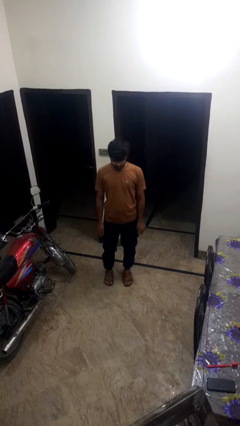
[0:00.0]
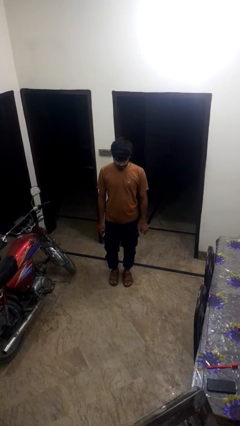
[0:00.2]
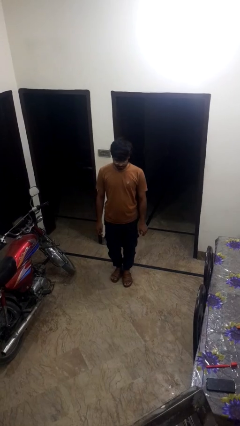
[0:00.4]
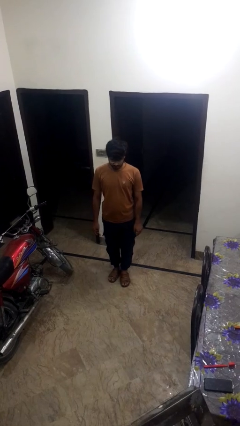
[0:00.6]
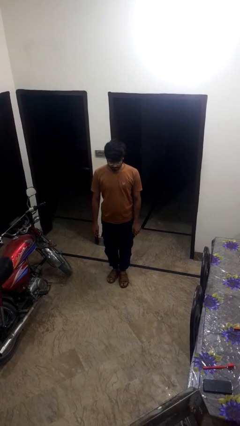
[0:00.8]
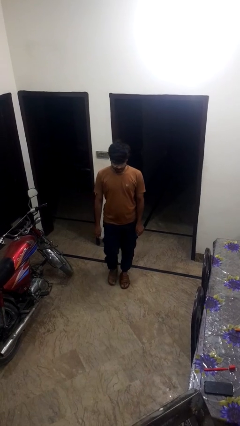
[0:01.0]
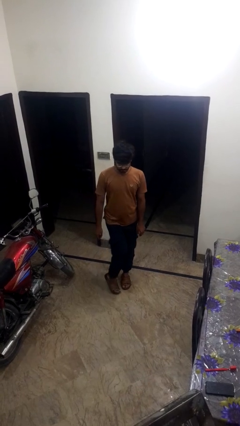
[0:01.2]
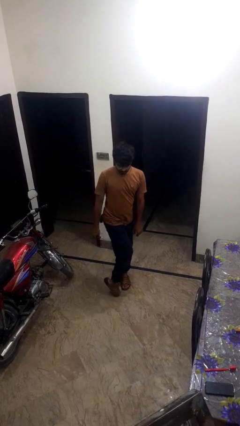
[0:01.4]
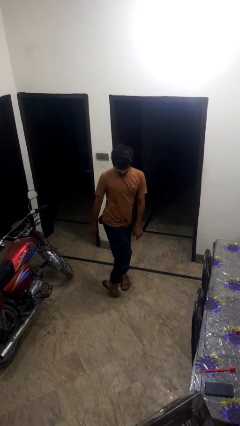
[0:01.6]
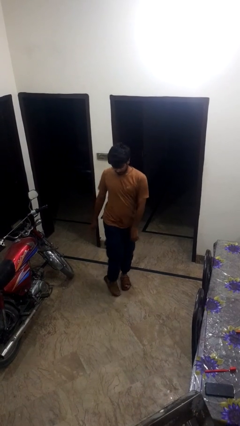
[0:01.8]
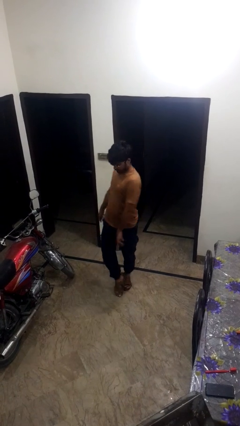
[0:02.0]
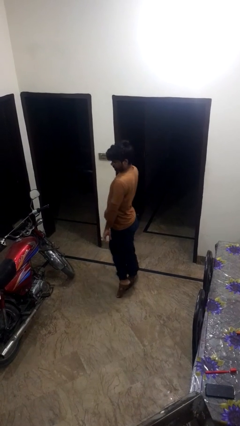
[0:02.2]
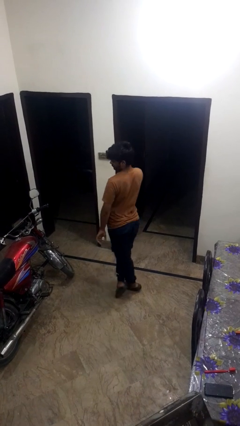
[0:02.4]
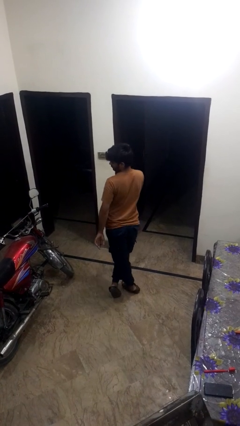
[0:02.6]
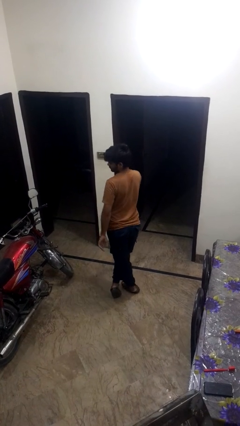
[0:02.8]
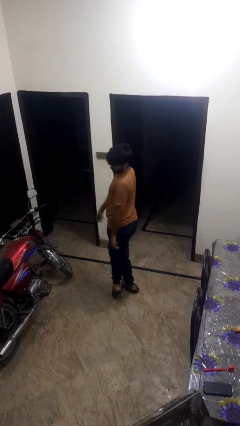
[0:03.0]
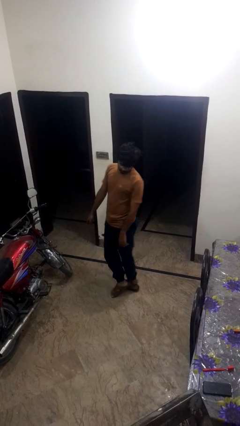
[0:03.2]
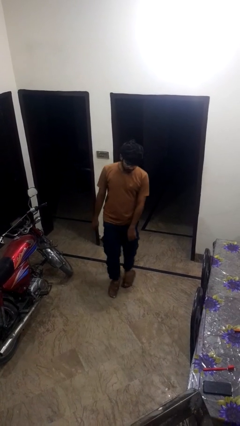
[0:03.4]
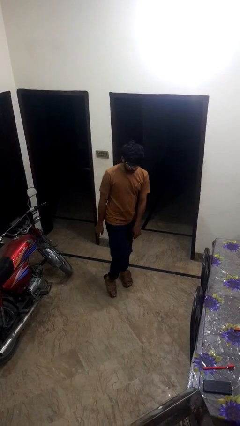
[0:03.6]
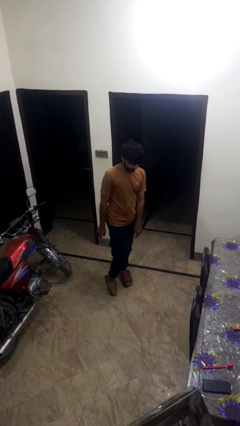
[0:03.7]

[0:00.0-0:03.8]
person twirls

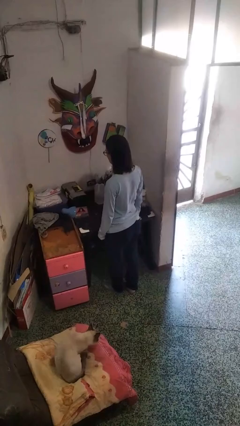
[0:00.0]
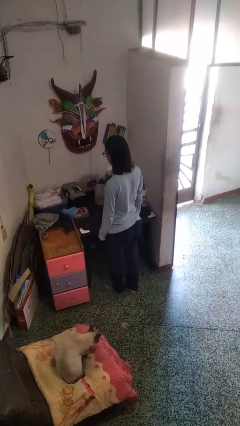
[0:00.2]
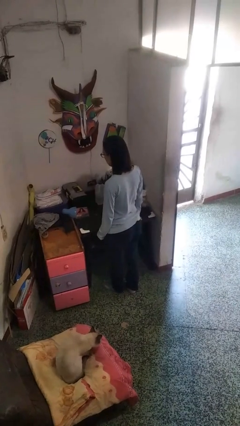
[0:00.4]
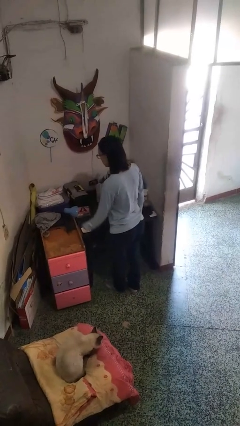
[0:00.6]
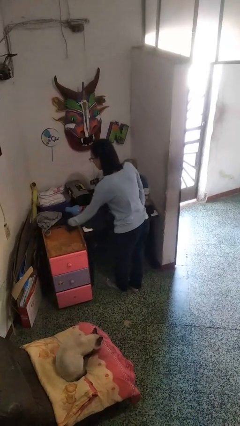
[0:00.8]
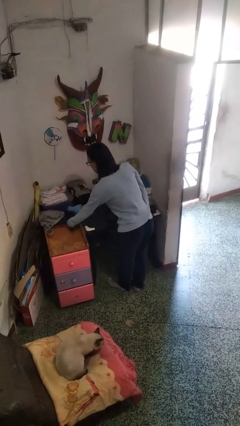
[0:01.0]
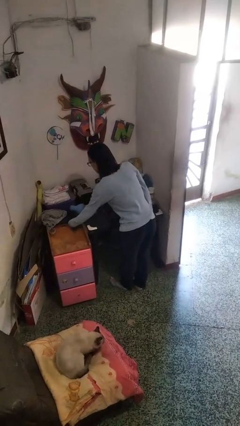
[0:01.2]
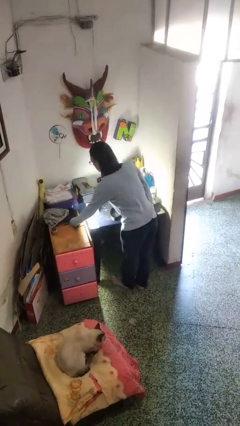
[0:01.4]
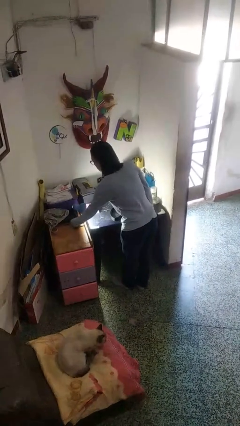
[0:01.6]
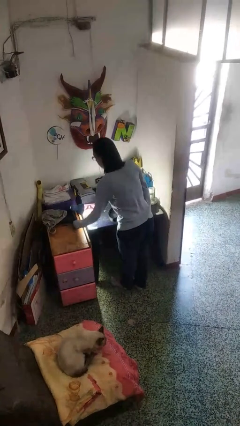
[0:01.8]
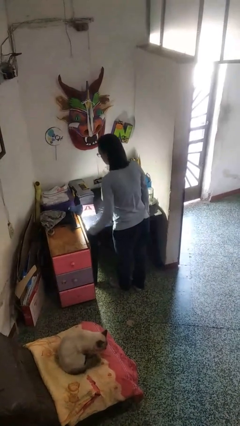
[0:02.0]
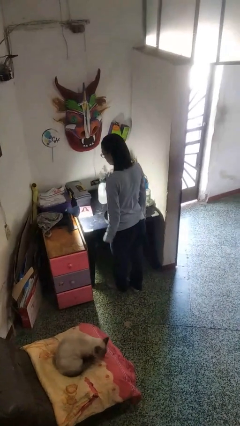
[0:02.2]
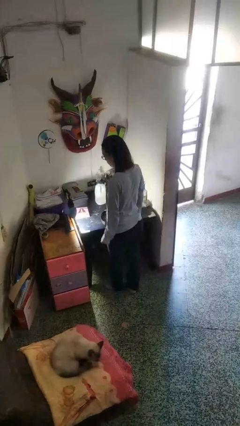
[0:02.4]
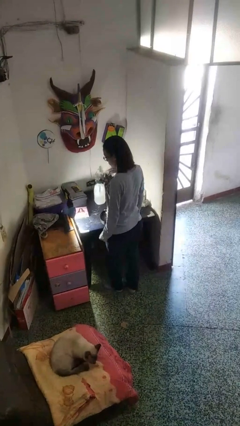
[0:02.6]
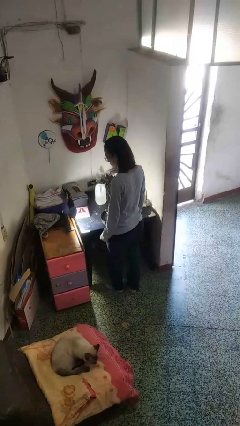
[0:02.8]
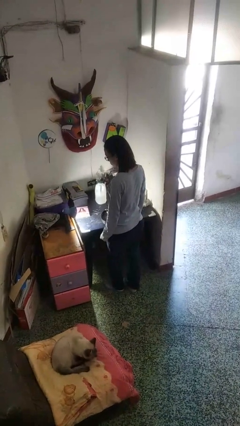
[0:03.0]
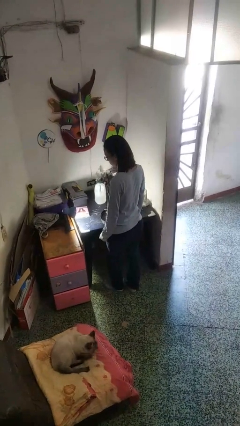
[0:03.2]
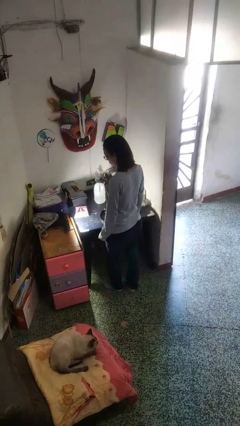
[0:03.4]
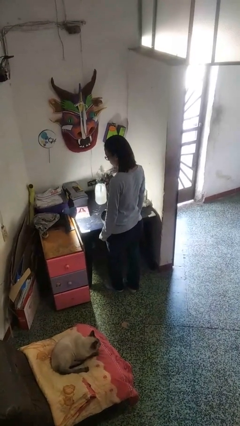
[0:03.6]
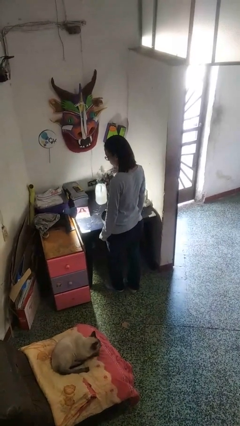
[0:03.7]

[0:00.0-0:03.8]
person turns on lamp

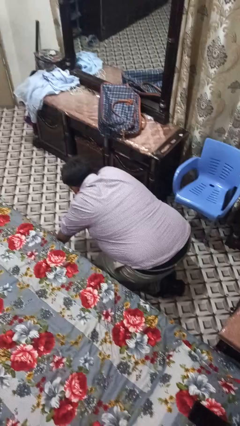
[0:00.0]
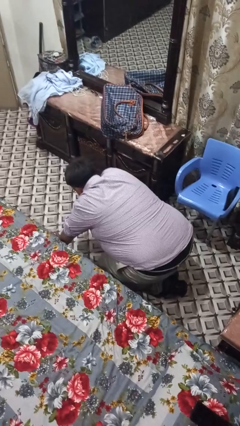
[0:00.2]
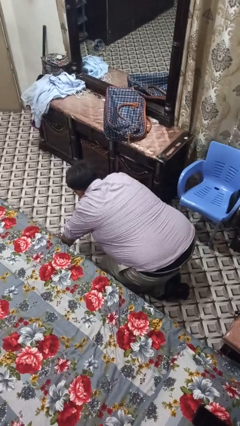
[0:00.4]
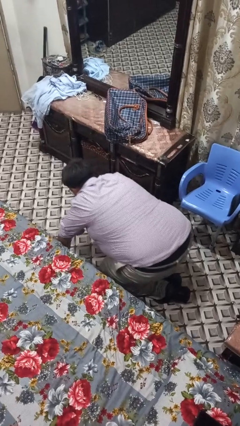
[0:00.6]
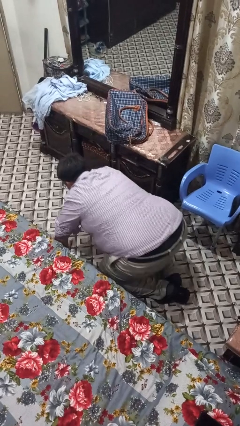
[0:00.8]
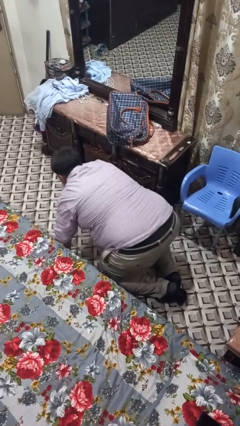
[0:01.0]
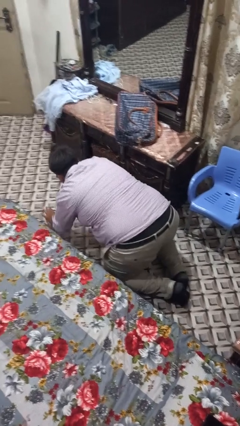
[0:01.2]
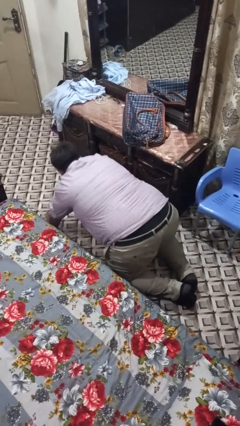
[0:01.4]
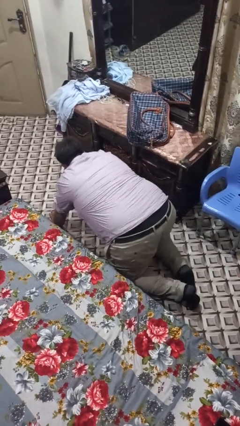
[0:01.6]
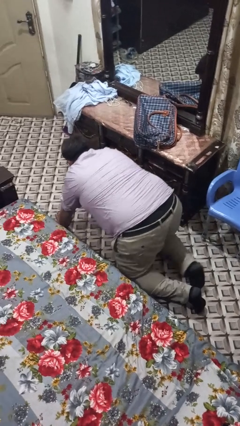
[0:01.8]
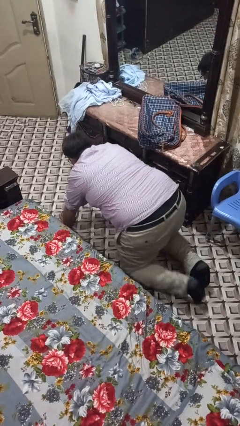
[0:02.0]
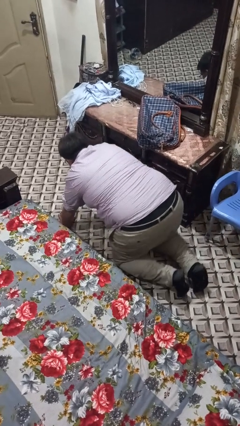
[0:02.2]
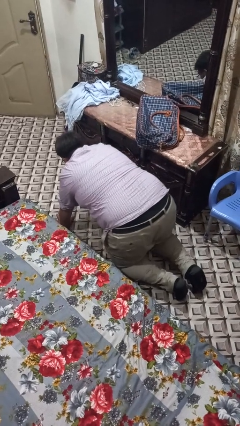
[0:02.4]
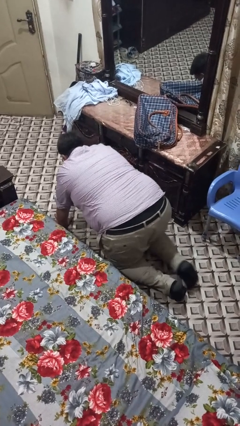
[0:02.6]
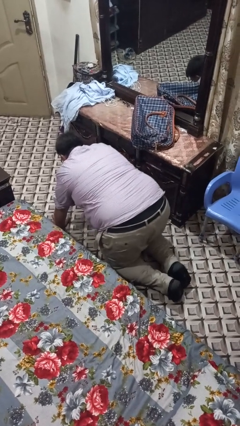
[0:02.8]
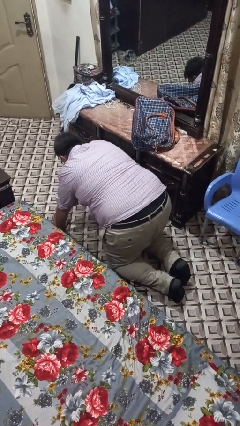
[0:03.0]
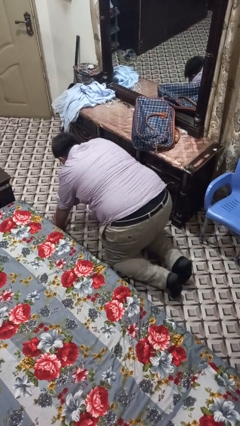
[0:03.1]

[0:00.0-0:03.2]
person crawls

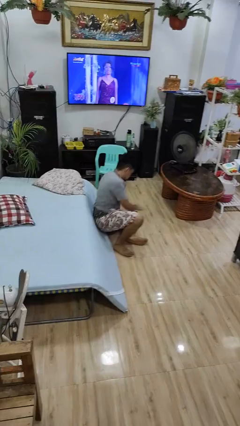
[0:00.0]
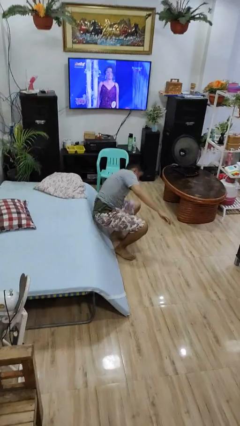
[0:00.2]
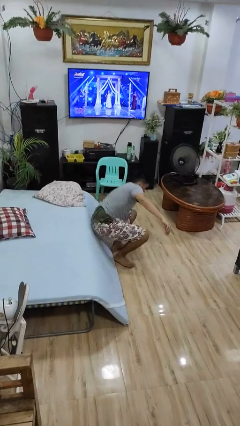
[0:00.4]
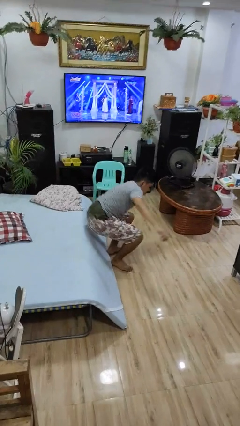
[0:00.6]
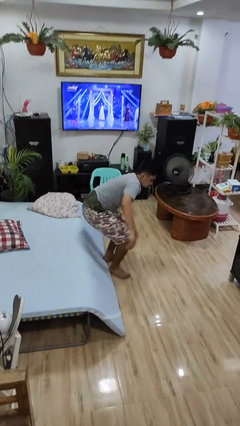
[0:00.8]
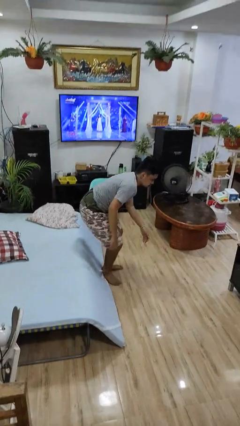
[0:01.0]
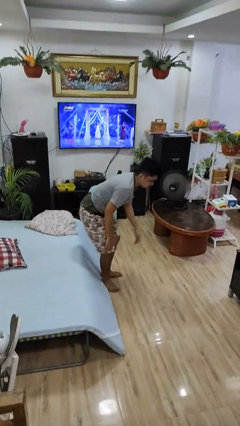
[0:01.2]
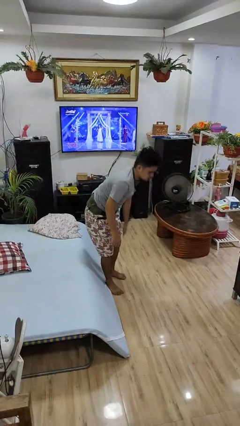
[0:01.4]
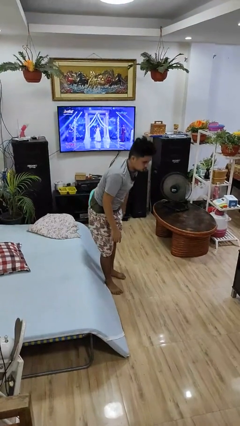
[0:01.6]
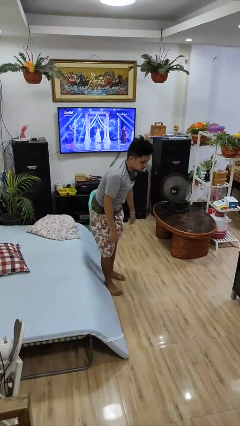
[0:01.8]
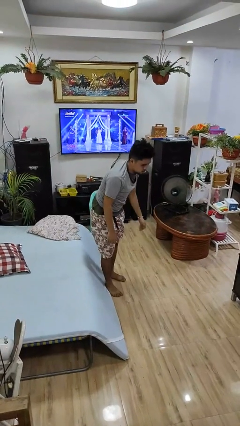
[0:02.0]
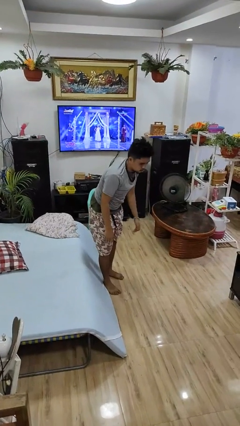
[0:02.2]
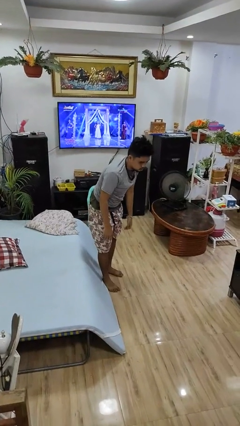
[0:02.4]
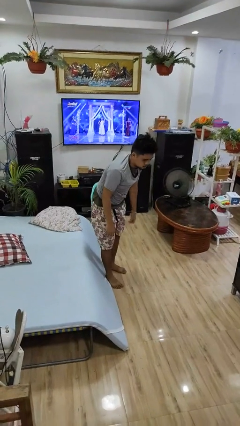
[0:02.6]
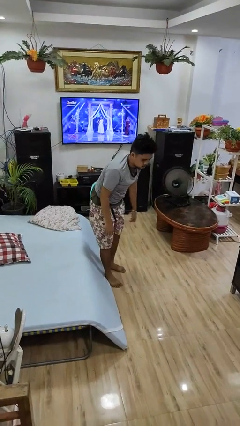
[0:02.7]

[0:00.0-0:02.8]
person stands up from floor

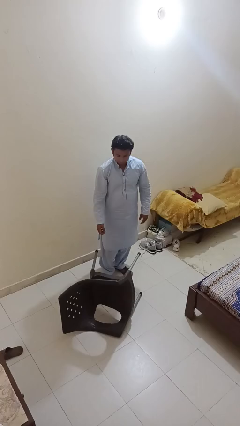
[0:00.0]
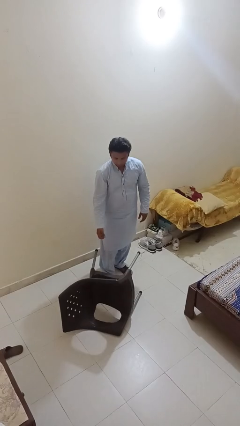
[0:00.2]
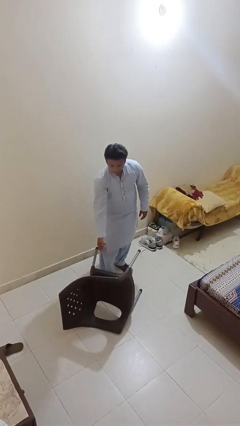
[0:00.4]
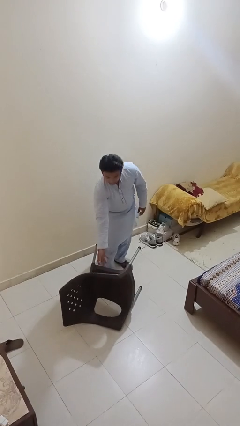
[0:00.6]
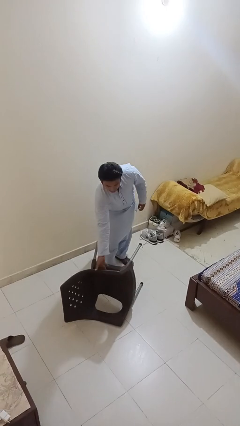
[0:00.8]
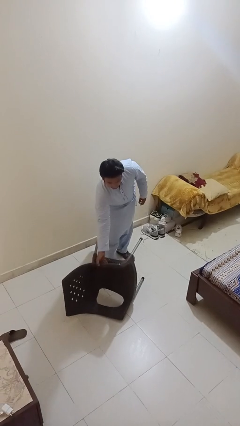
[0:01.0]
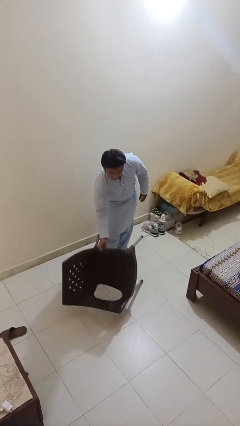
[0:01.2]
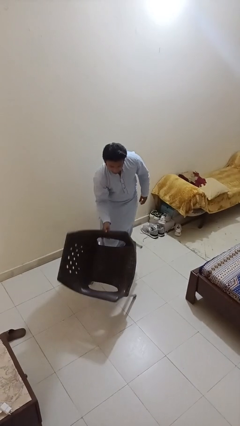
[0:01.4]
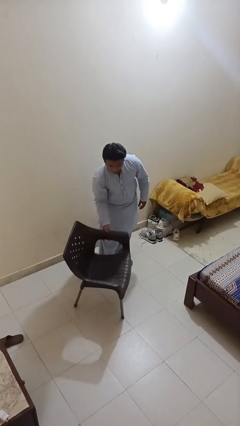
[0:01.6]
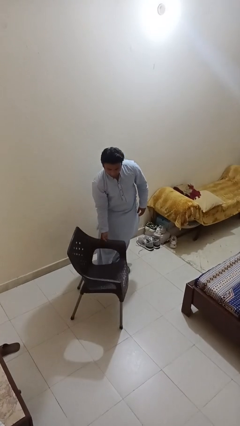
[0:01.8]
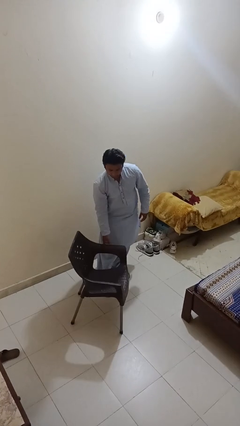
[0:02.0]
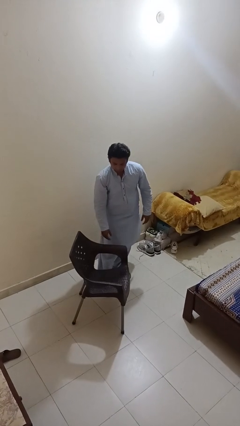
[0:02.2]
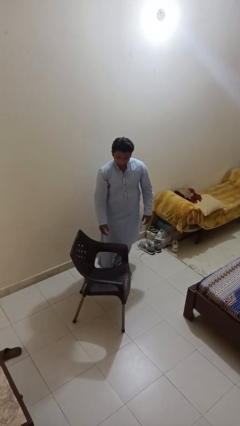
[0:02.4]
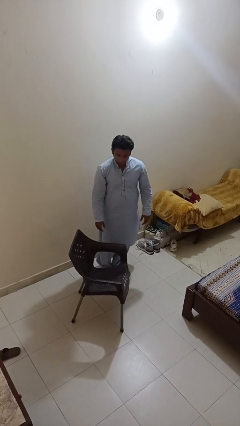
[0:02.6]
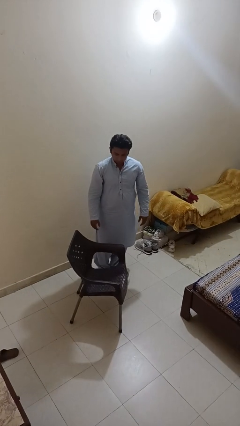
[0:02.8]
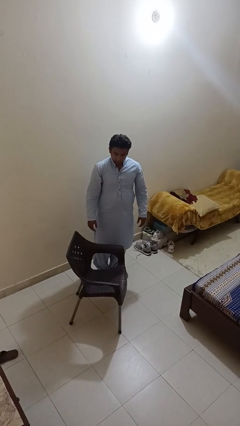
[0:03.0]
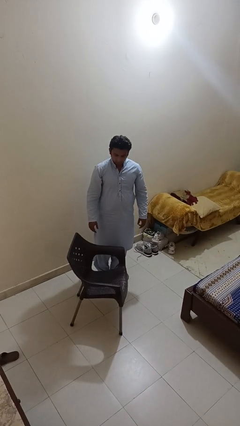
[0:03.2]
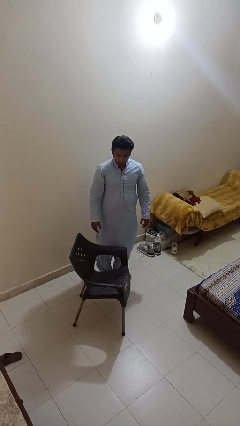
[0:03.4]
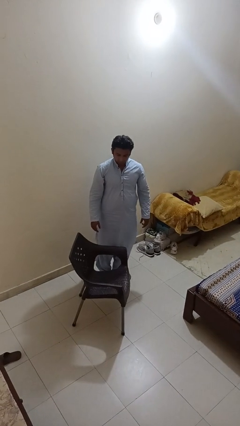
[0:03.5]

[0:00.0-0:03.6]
person sets upright furniture

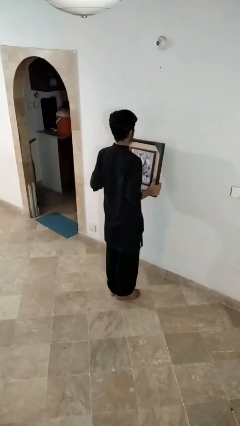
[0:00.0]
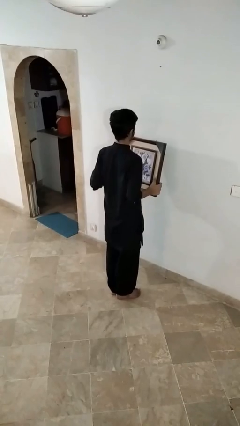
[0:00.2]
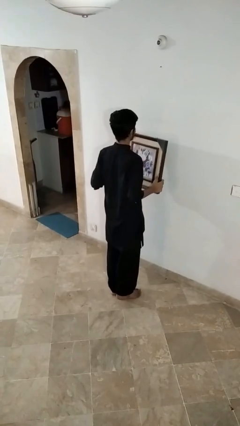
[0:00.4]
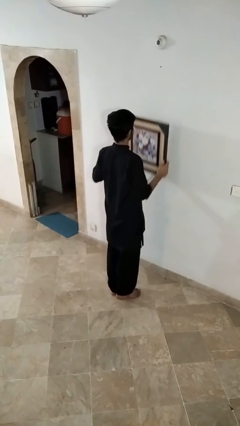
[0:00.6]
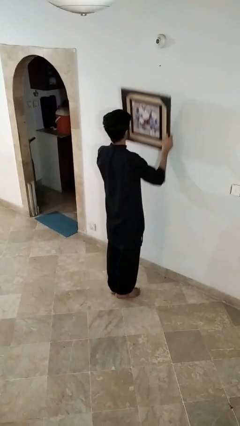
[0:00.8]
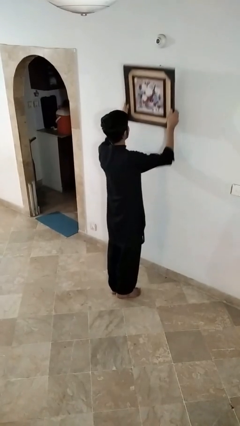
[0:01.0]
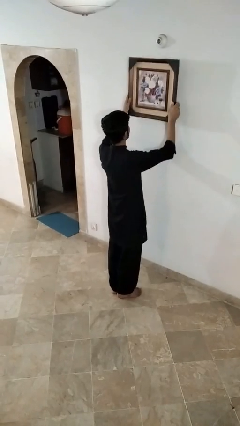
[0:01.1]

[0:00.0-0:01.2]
person takes down picture frame
